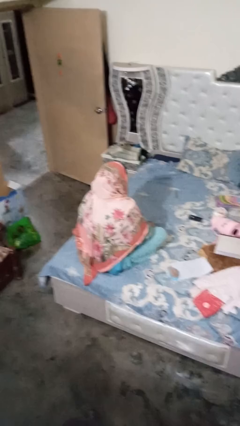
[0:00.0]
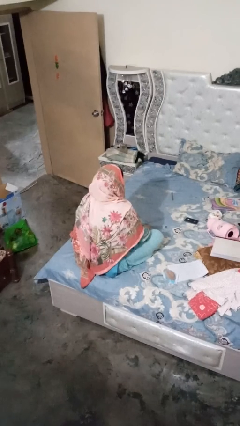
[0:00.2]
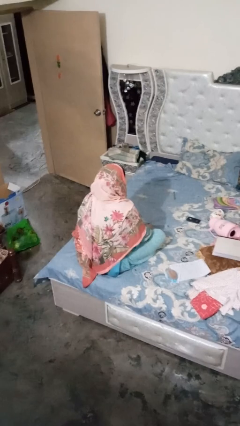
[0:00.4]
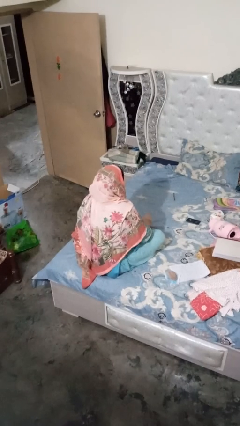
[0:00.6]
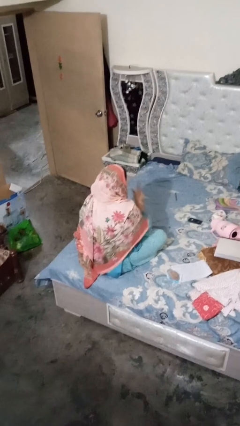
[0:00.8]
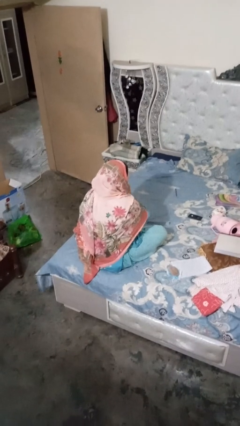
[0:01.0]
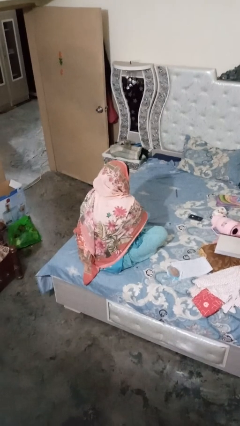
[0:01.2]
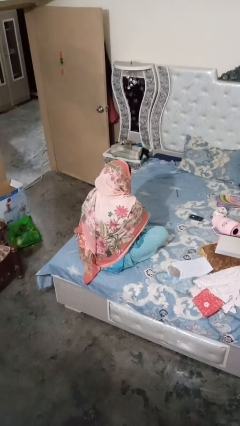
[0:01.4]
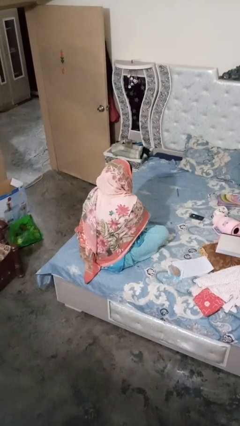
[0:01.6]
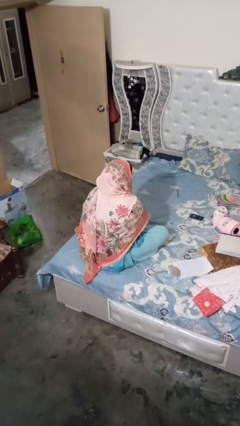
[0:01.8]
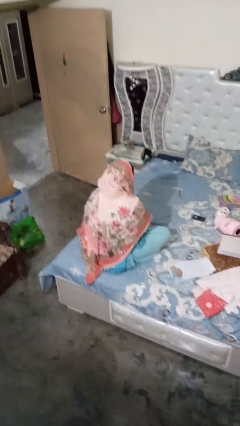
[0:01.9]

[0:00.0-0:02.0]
person gestures be quiet

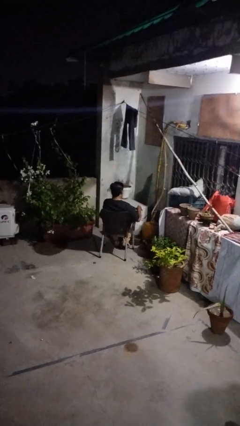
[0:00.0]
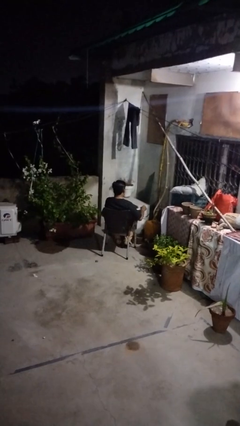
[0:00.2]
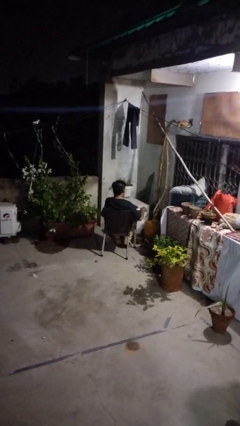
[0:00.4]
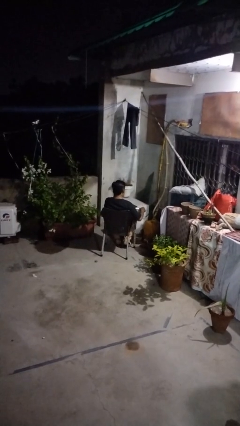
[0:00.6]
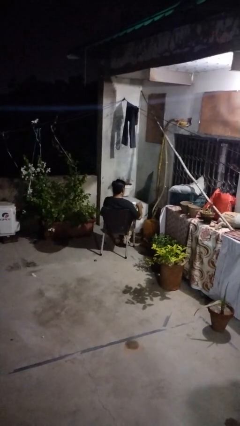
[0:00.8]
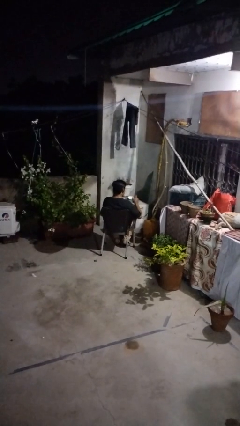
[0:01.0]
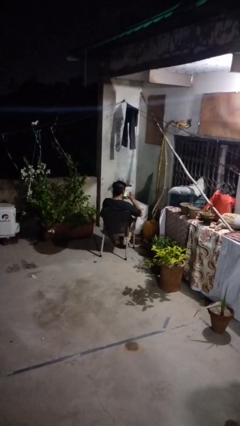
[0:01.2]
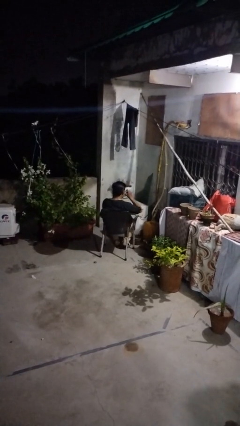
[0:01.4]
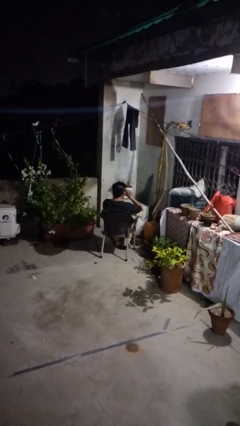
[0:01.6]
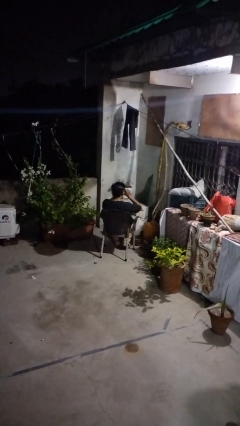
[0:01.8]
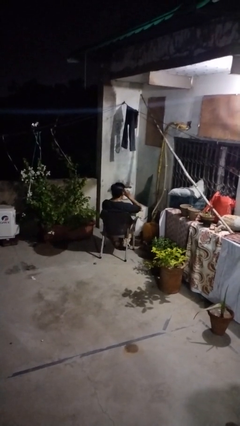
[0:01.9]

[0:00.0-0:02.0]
person drinks from mug

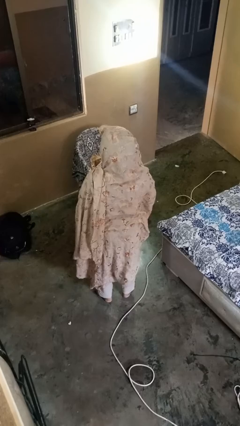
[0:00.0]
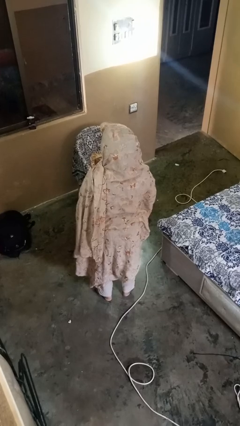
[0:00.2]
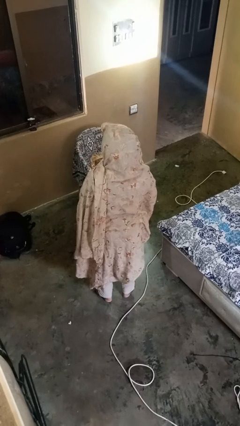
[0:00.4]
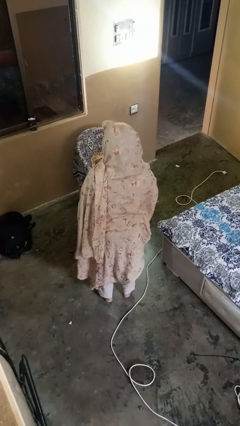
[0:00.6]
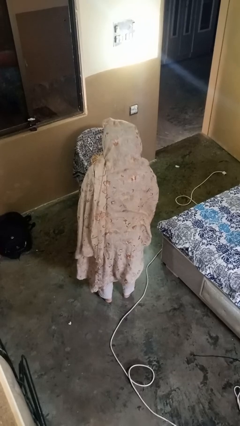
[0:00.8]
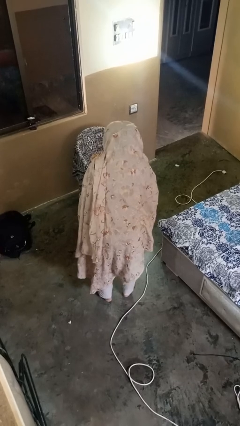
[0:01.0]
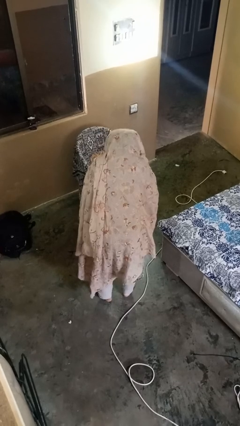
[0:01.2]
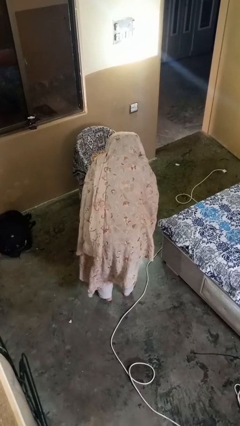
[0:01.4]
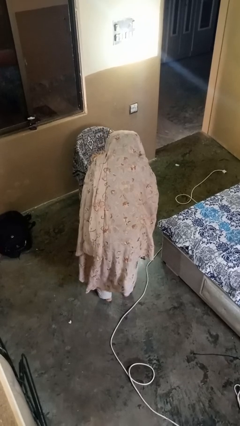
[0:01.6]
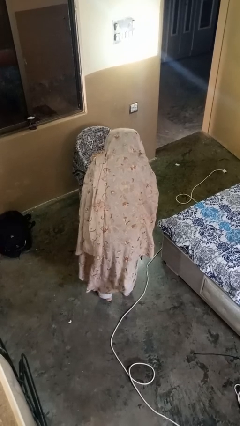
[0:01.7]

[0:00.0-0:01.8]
person bows

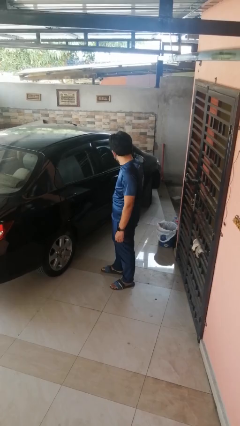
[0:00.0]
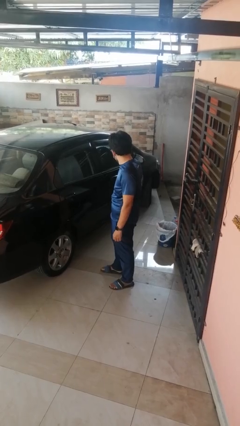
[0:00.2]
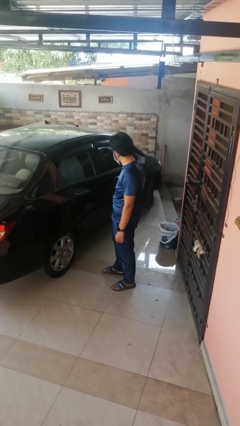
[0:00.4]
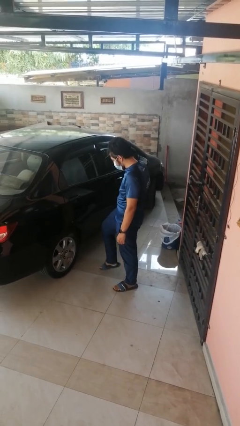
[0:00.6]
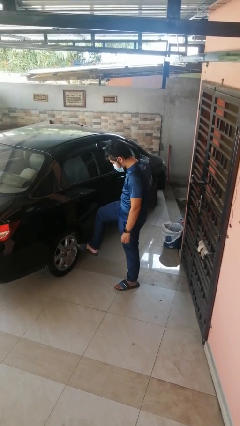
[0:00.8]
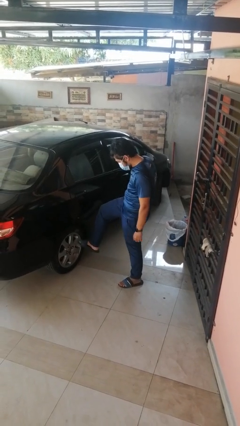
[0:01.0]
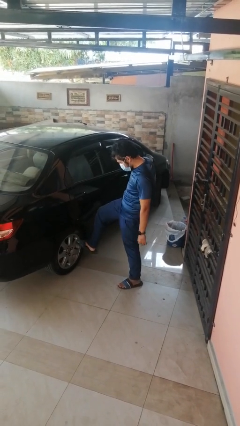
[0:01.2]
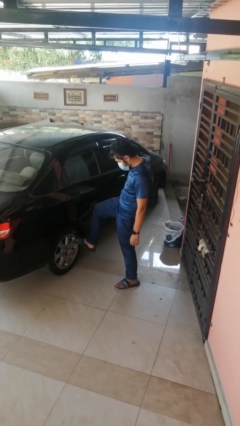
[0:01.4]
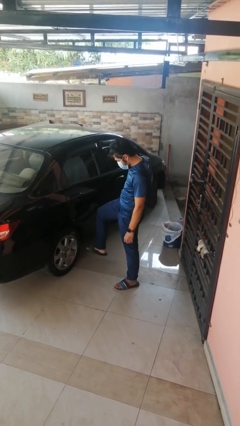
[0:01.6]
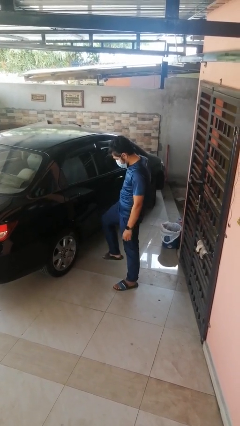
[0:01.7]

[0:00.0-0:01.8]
person kicks car tires

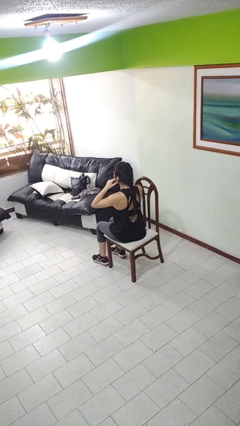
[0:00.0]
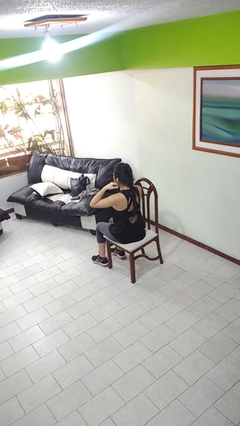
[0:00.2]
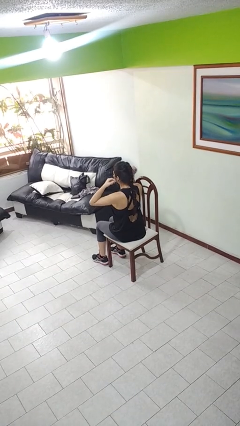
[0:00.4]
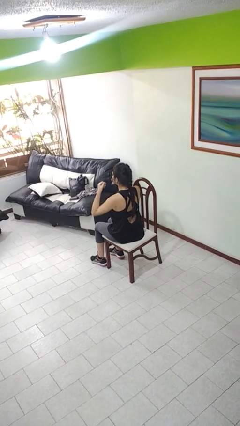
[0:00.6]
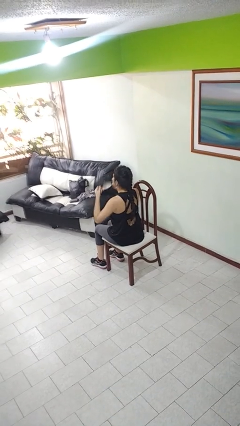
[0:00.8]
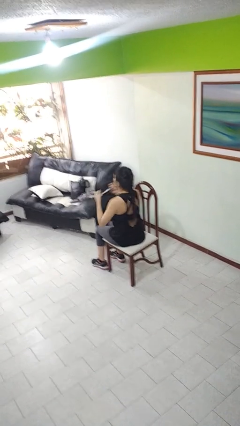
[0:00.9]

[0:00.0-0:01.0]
person takes off facemask

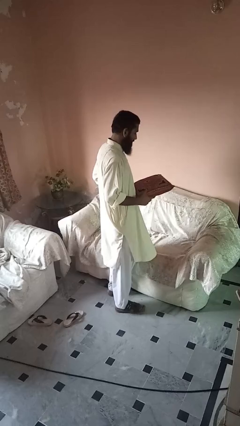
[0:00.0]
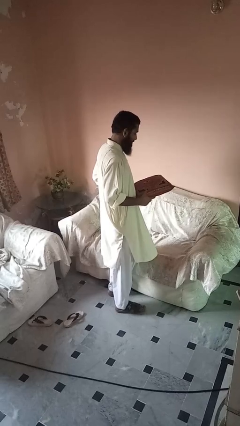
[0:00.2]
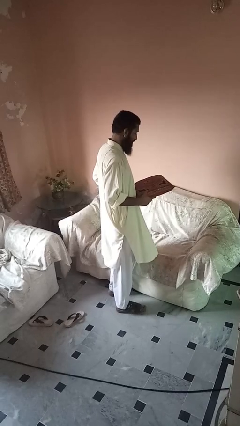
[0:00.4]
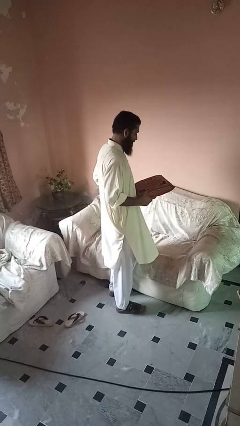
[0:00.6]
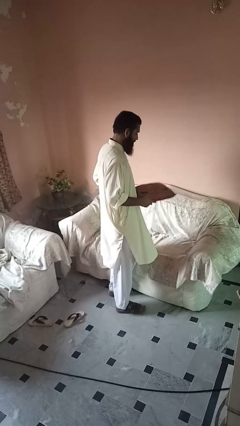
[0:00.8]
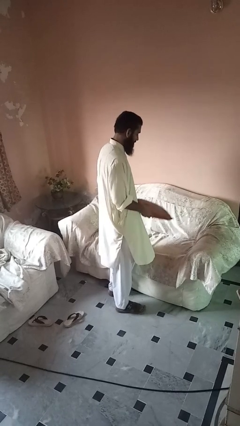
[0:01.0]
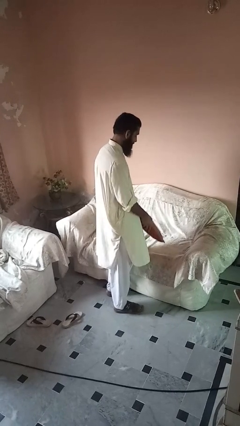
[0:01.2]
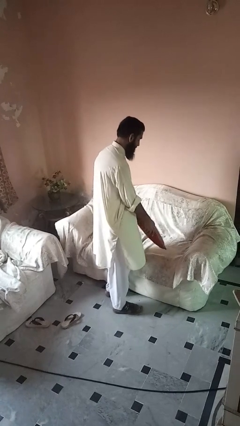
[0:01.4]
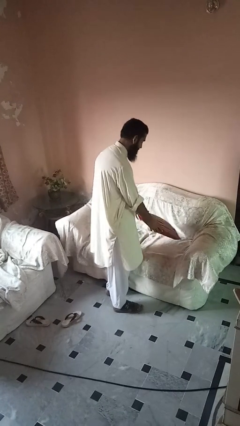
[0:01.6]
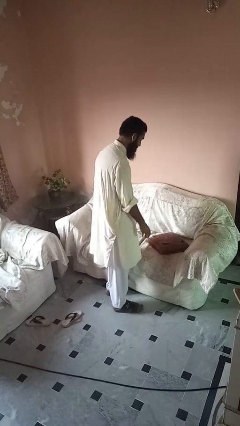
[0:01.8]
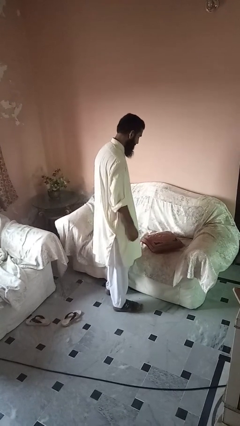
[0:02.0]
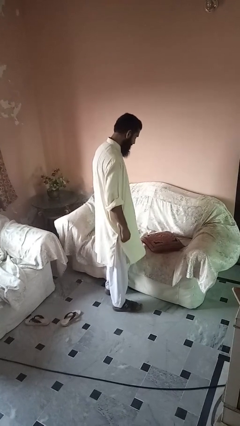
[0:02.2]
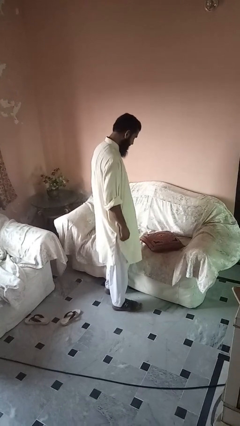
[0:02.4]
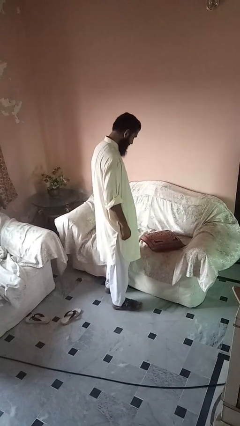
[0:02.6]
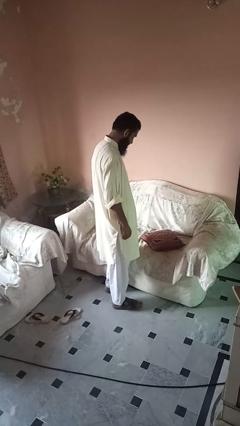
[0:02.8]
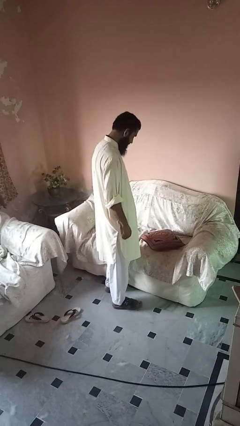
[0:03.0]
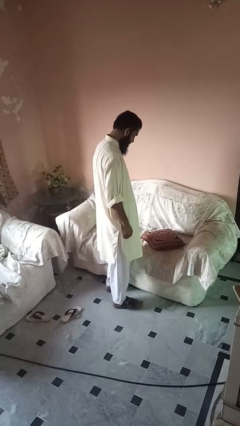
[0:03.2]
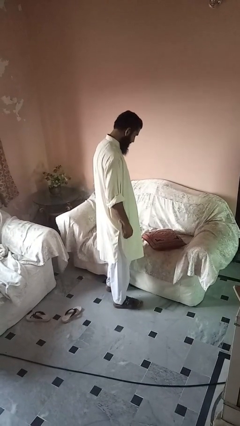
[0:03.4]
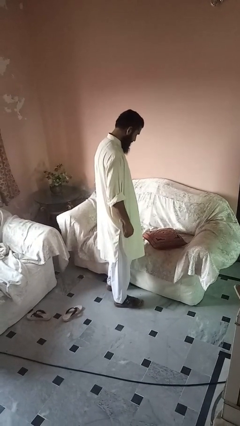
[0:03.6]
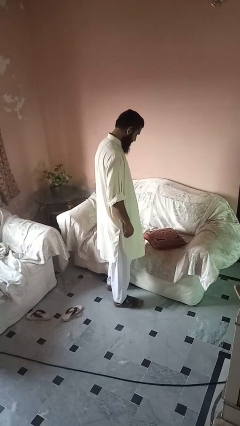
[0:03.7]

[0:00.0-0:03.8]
person puts down object on couch

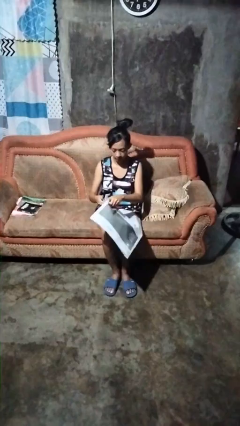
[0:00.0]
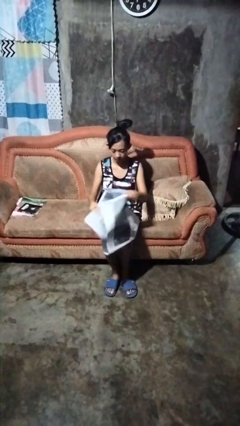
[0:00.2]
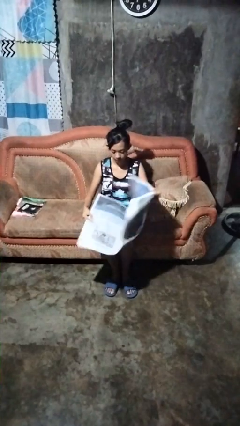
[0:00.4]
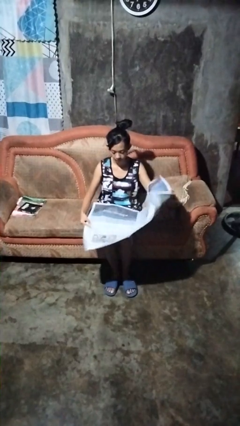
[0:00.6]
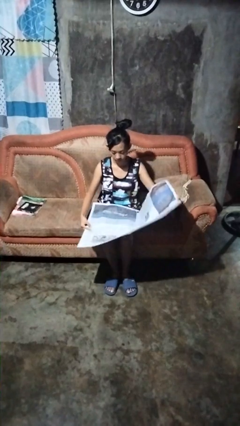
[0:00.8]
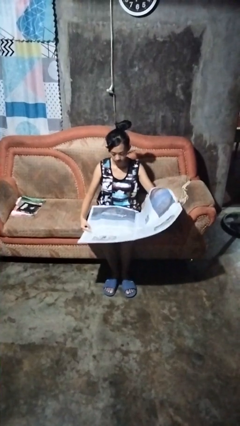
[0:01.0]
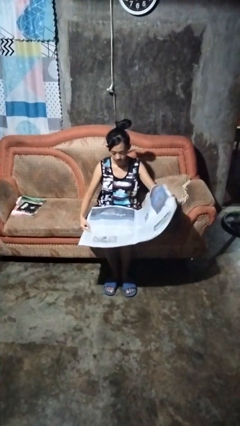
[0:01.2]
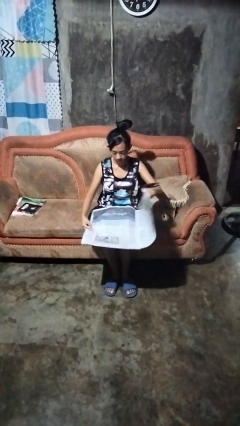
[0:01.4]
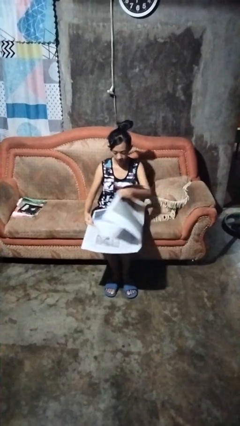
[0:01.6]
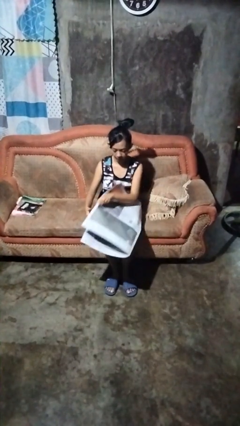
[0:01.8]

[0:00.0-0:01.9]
person reads newspaper

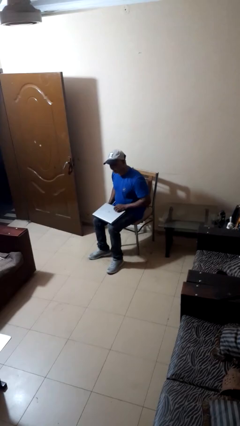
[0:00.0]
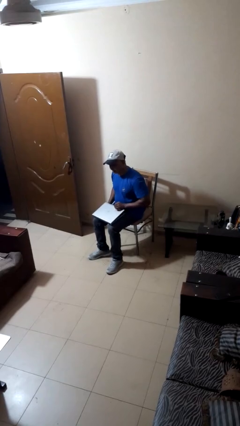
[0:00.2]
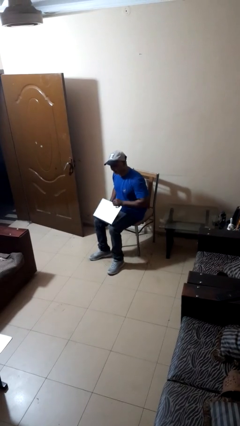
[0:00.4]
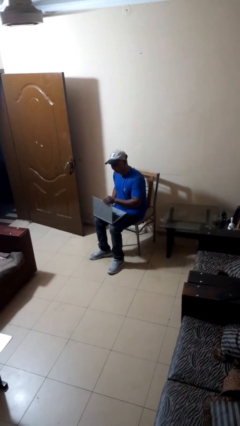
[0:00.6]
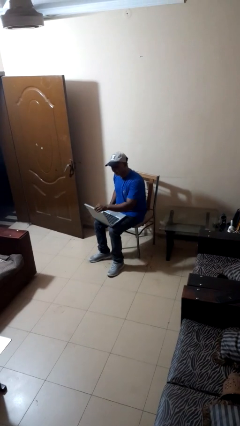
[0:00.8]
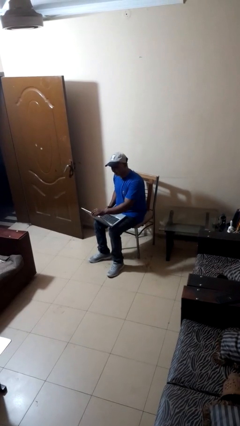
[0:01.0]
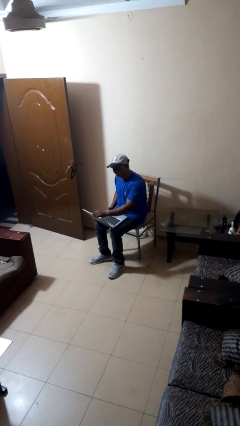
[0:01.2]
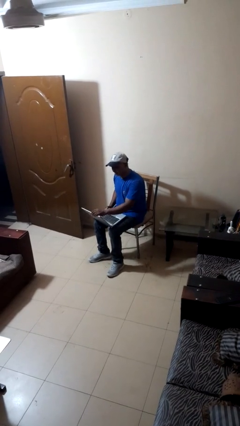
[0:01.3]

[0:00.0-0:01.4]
person opens laptop

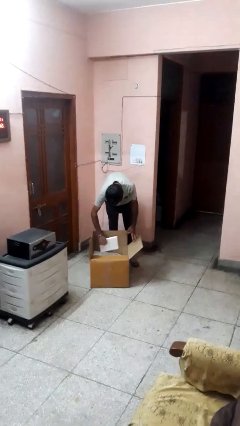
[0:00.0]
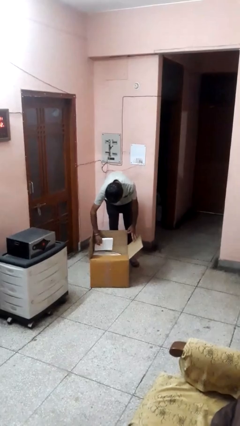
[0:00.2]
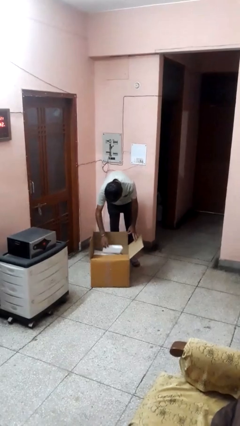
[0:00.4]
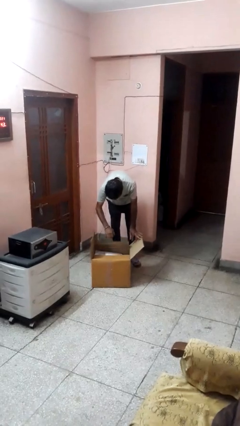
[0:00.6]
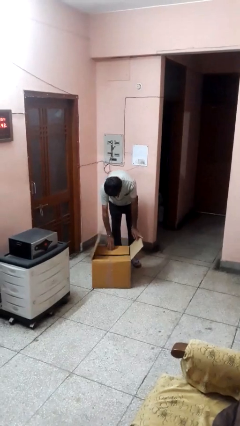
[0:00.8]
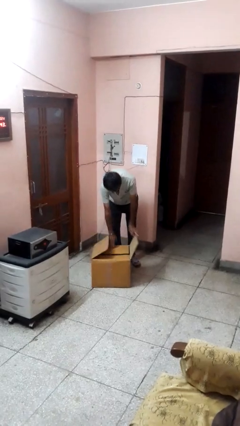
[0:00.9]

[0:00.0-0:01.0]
person searches in box
